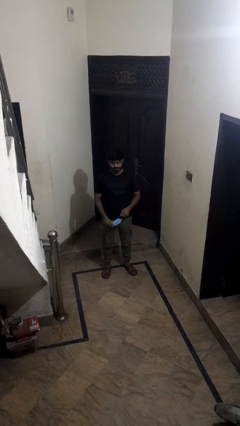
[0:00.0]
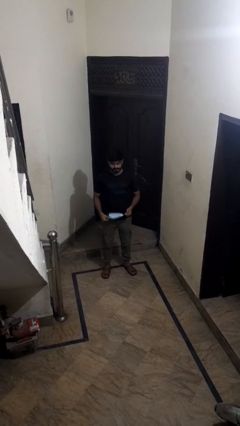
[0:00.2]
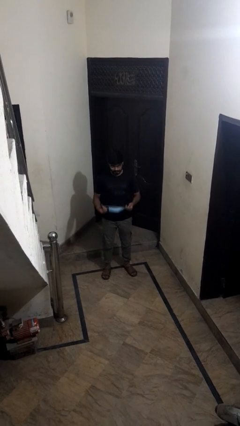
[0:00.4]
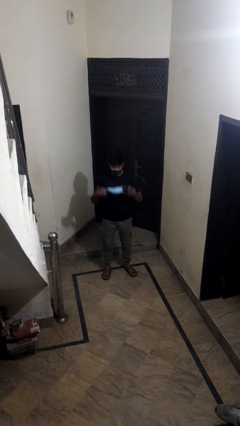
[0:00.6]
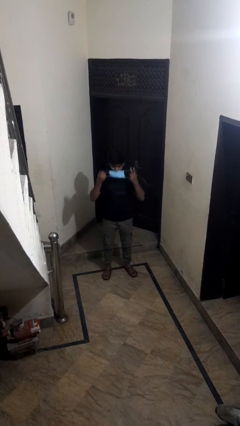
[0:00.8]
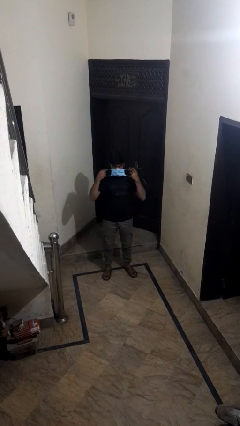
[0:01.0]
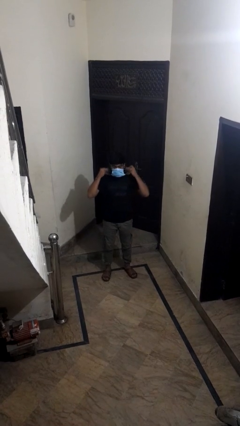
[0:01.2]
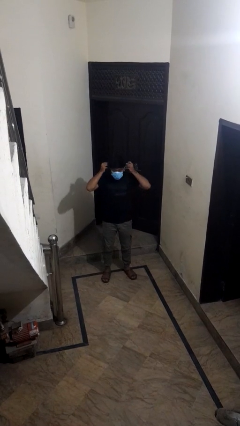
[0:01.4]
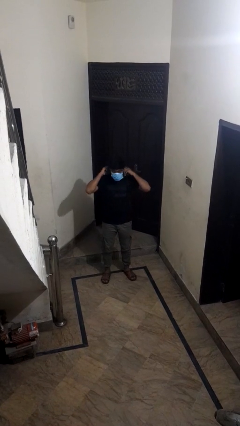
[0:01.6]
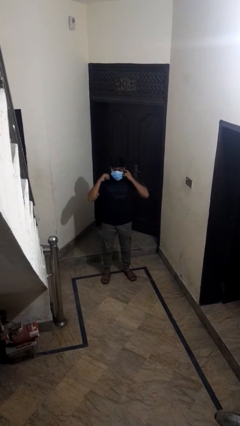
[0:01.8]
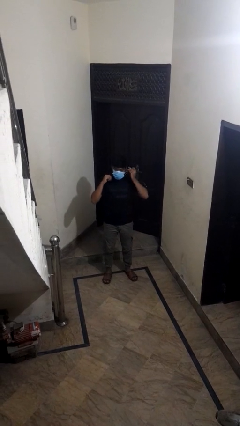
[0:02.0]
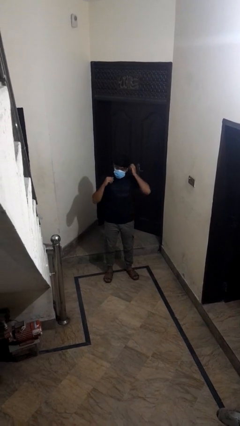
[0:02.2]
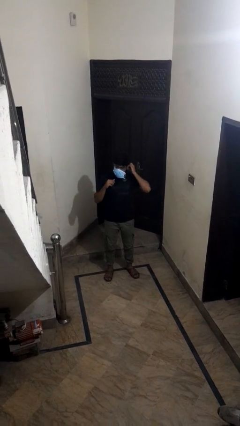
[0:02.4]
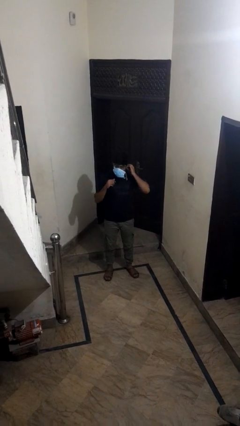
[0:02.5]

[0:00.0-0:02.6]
person puts on facemask

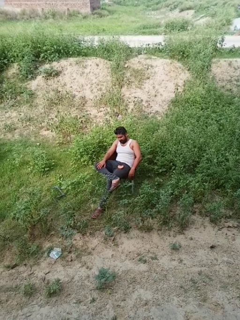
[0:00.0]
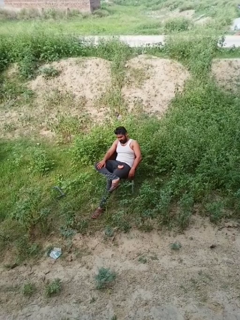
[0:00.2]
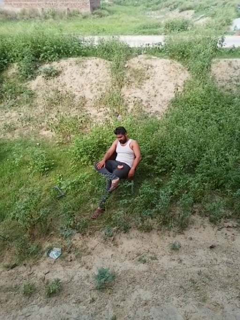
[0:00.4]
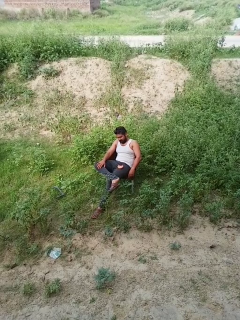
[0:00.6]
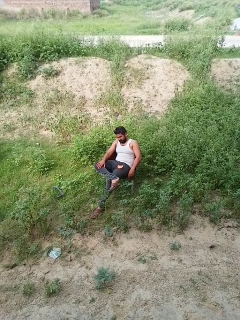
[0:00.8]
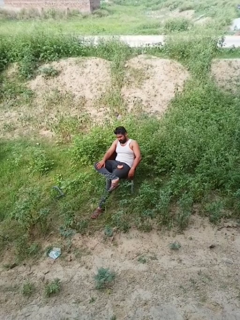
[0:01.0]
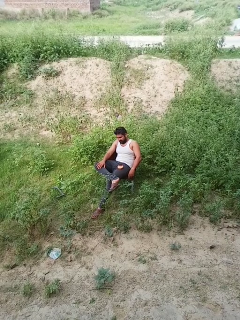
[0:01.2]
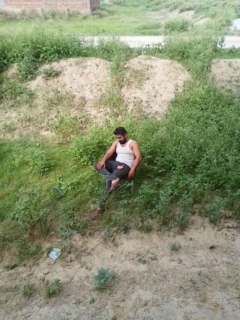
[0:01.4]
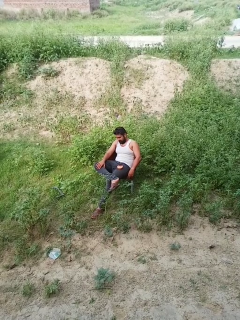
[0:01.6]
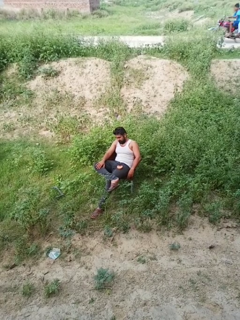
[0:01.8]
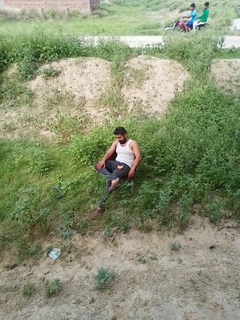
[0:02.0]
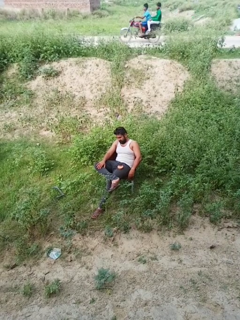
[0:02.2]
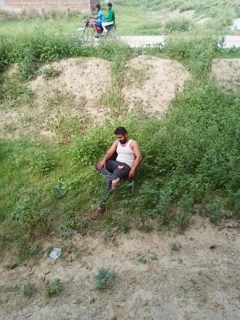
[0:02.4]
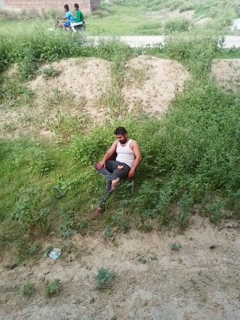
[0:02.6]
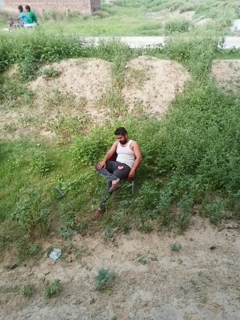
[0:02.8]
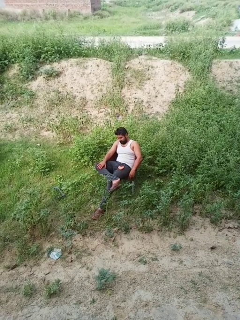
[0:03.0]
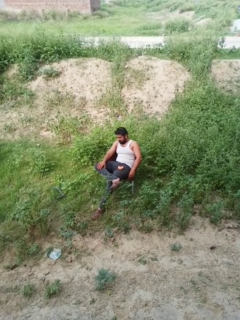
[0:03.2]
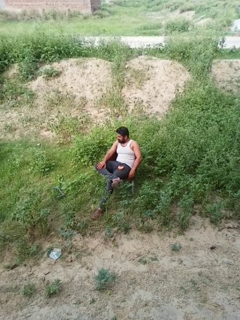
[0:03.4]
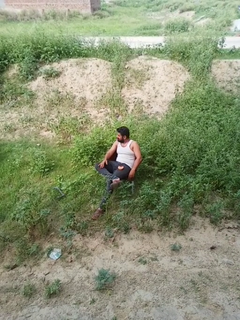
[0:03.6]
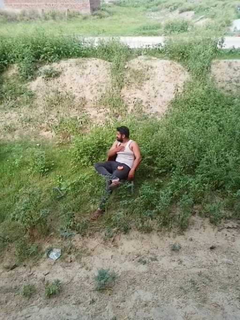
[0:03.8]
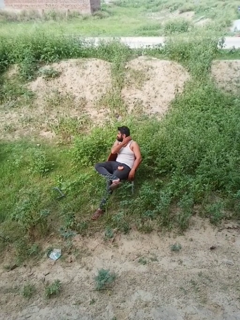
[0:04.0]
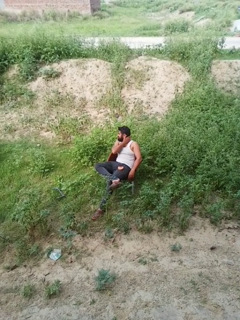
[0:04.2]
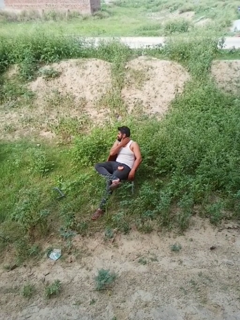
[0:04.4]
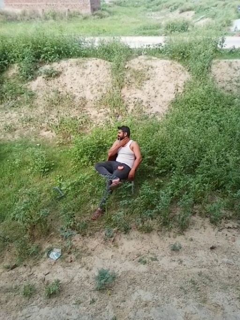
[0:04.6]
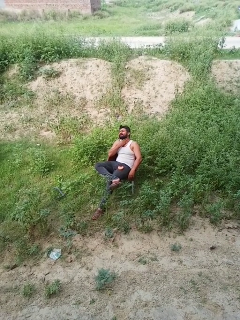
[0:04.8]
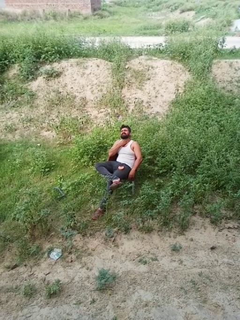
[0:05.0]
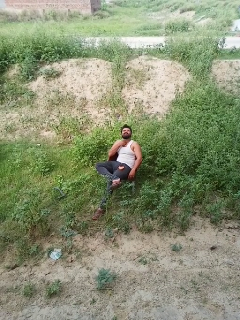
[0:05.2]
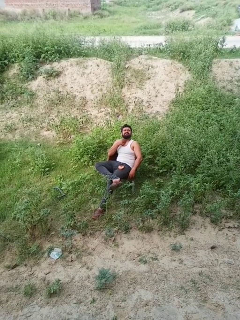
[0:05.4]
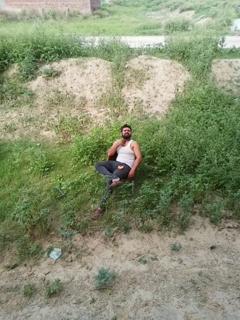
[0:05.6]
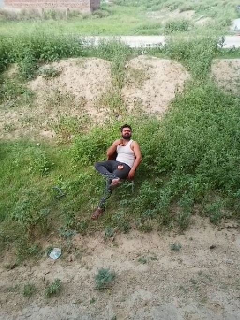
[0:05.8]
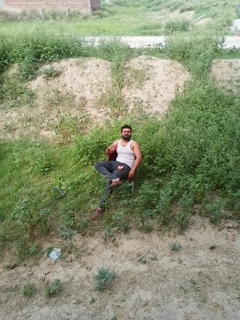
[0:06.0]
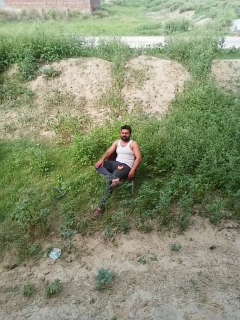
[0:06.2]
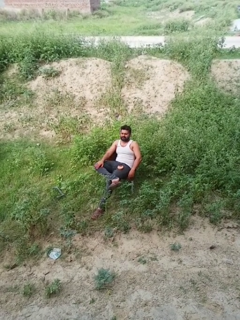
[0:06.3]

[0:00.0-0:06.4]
person rubs neck

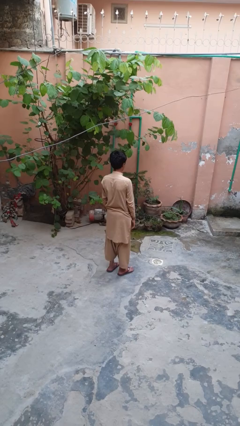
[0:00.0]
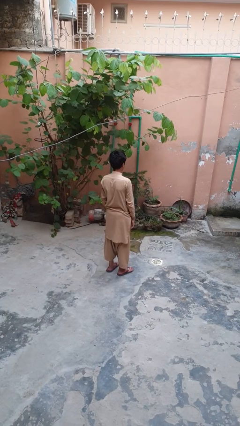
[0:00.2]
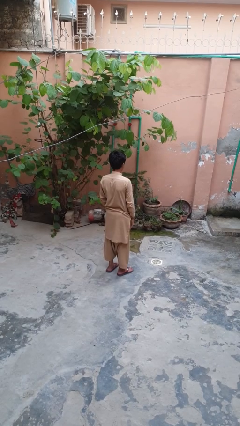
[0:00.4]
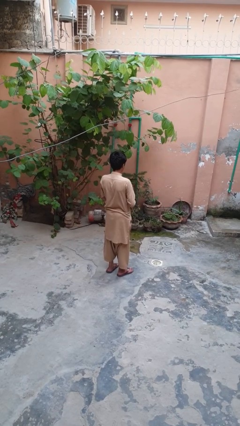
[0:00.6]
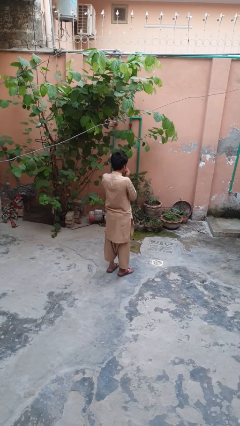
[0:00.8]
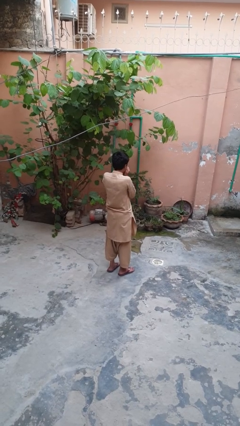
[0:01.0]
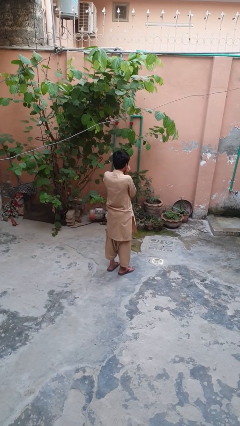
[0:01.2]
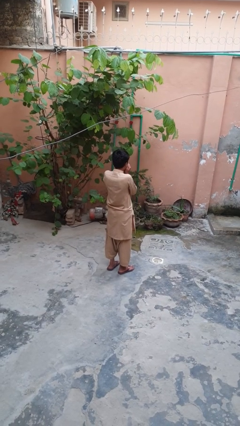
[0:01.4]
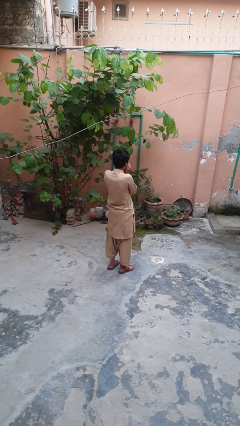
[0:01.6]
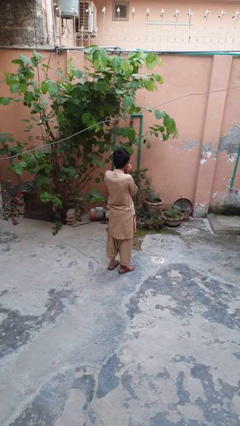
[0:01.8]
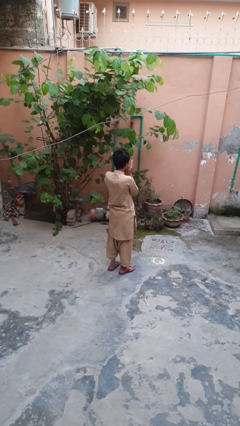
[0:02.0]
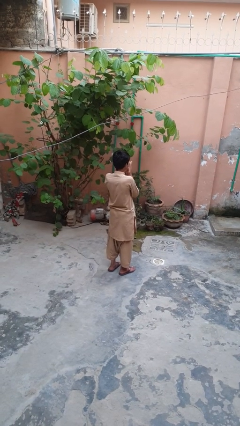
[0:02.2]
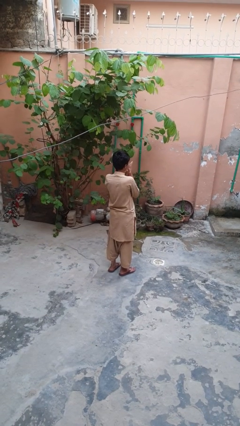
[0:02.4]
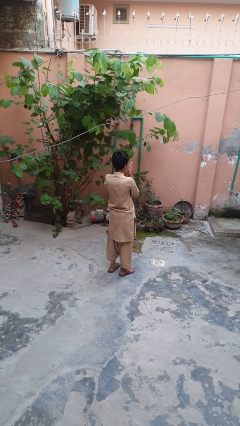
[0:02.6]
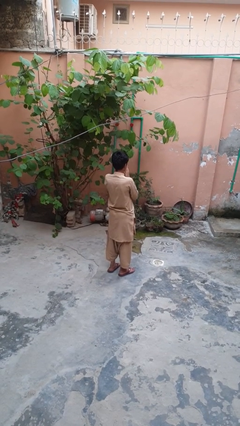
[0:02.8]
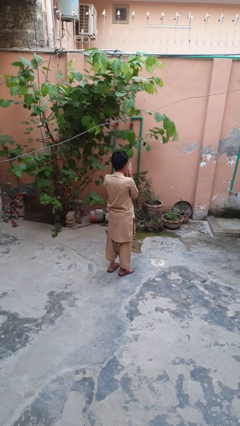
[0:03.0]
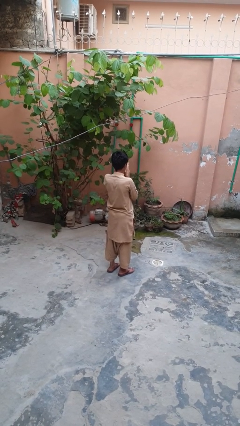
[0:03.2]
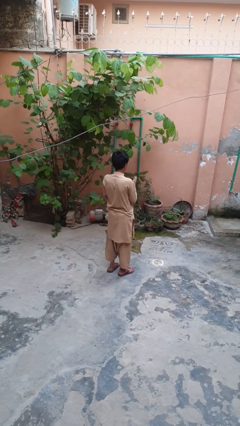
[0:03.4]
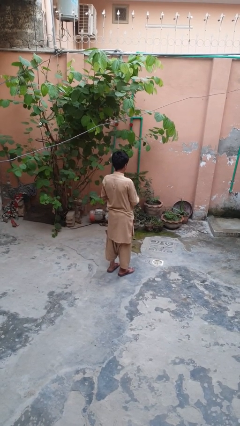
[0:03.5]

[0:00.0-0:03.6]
person blows into hands

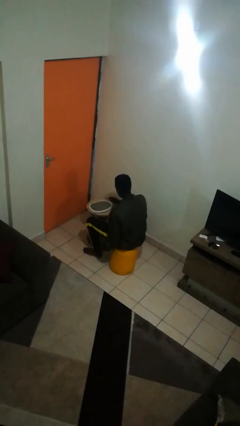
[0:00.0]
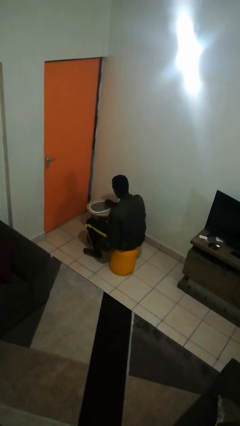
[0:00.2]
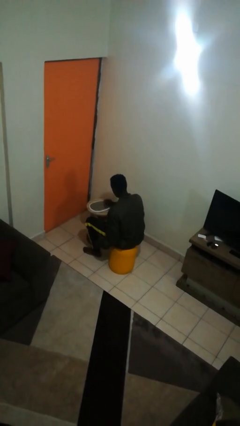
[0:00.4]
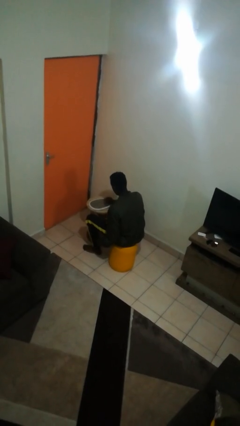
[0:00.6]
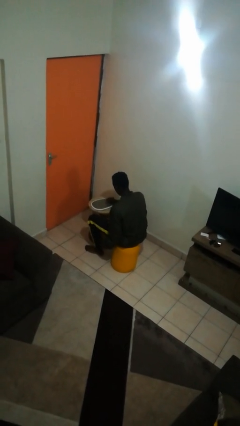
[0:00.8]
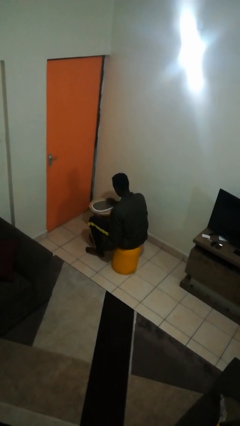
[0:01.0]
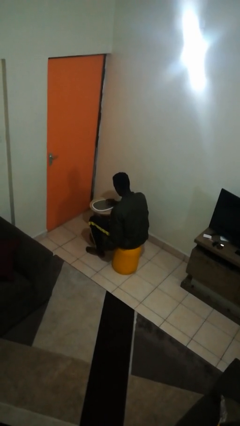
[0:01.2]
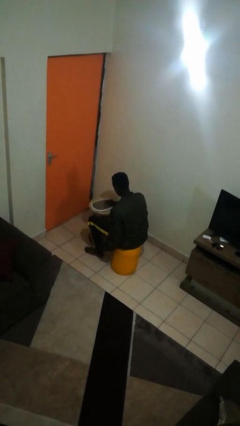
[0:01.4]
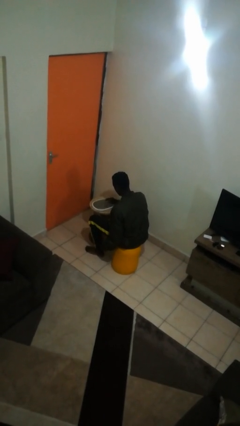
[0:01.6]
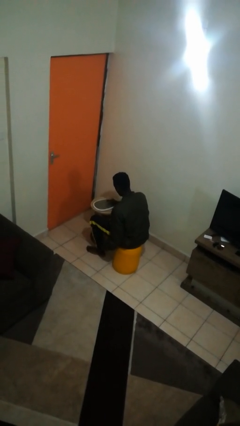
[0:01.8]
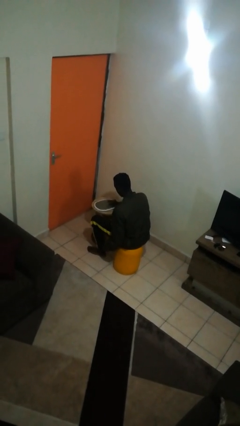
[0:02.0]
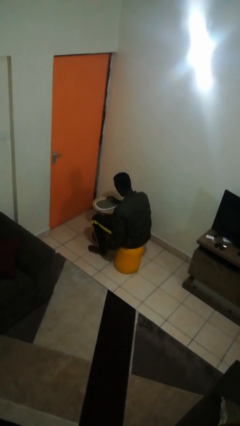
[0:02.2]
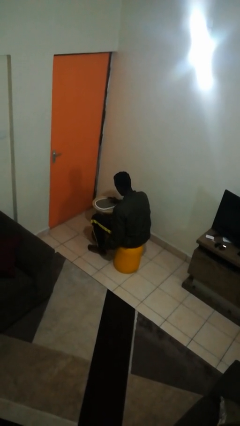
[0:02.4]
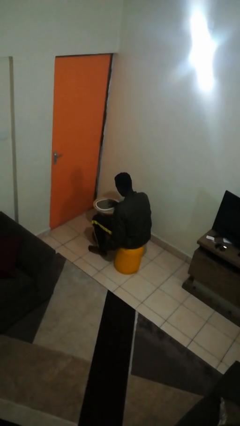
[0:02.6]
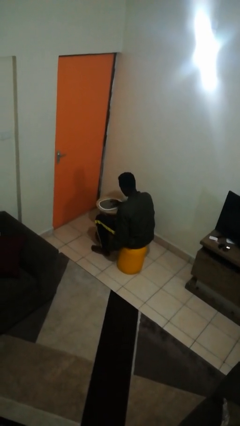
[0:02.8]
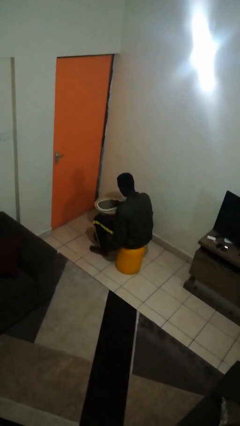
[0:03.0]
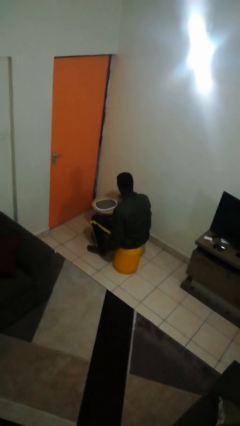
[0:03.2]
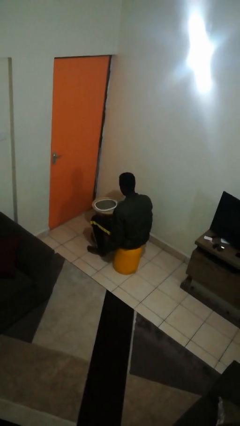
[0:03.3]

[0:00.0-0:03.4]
person taps object with finger

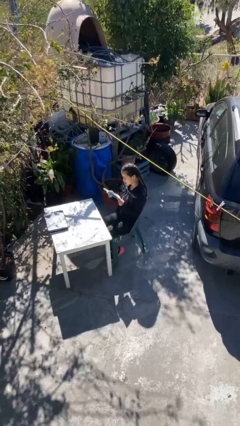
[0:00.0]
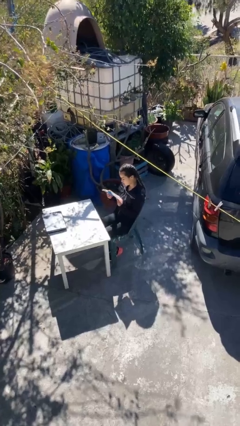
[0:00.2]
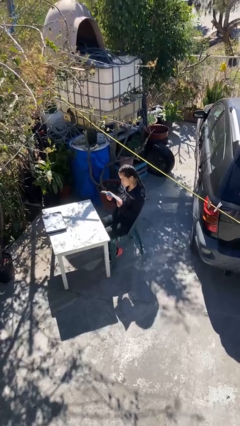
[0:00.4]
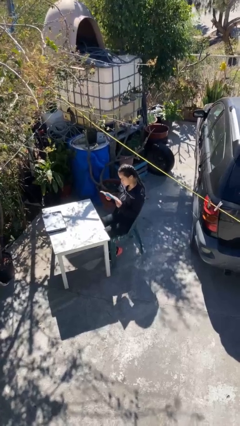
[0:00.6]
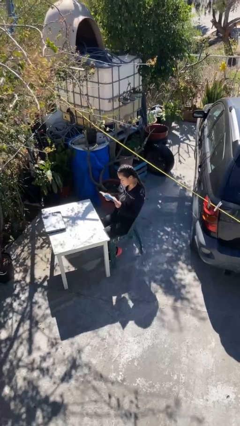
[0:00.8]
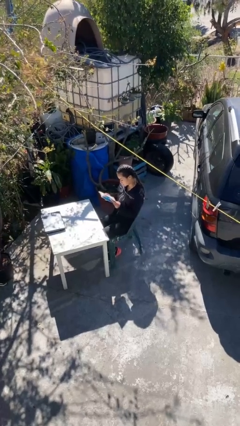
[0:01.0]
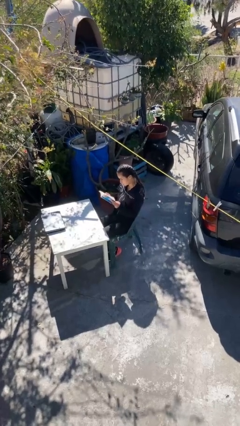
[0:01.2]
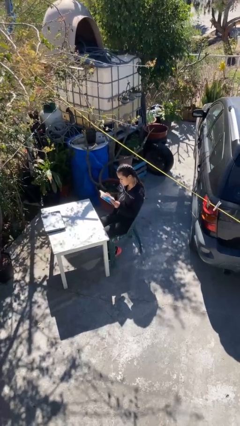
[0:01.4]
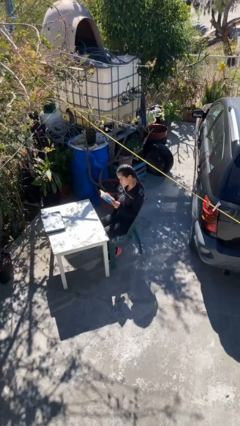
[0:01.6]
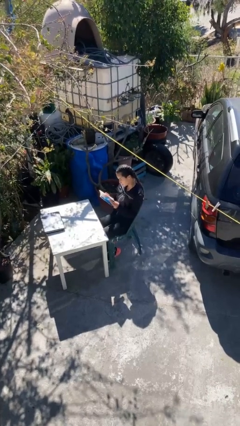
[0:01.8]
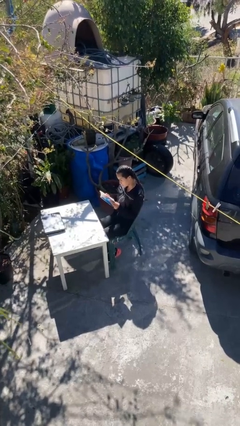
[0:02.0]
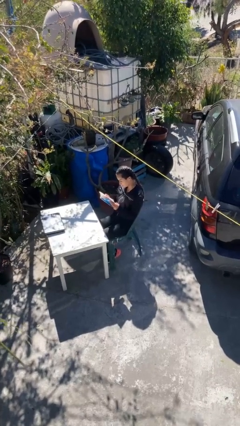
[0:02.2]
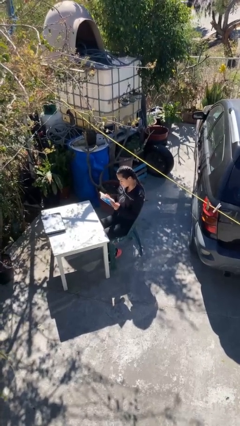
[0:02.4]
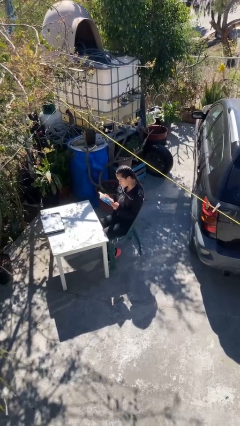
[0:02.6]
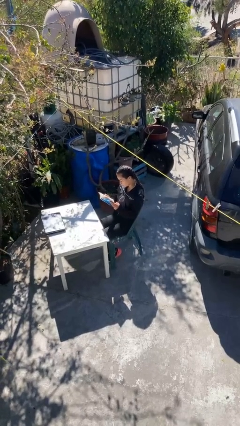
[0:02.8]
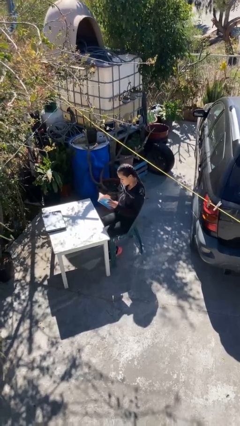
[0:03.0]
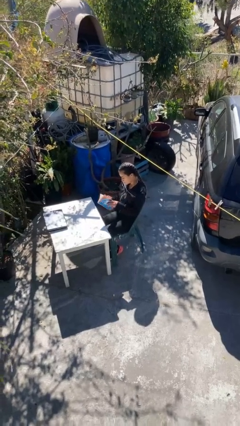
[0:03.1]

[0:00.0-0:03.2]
person reads document
